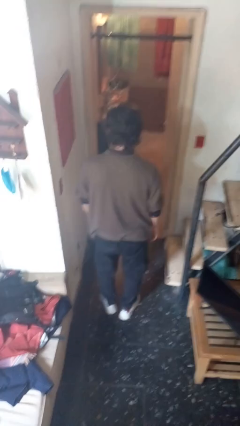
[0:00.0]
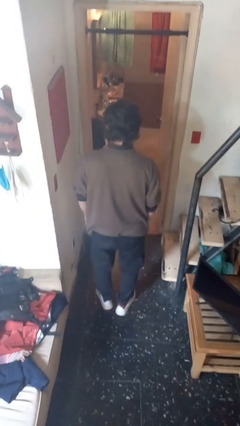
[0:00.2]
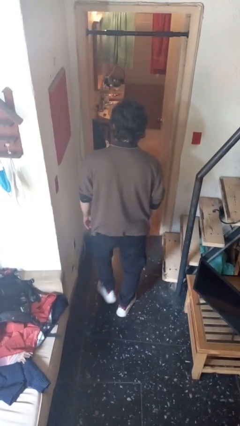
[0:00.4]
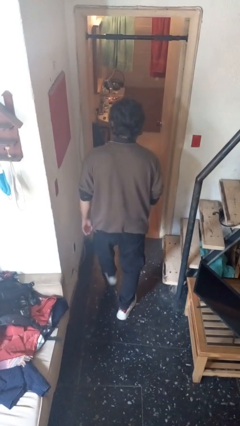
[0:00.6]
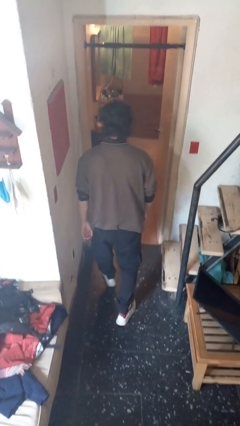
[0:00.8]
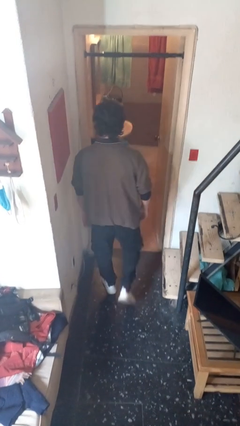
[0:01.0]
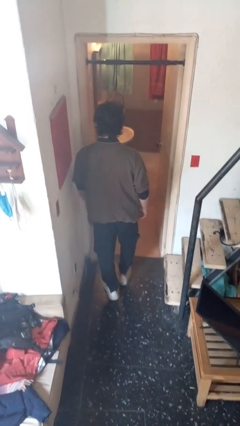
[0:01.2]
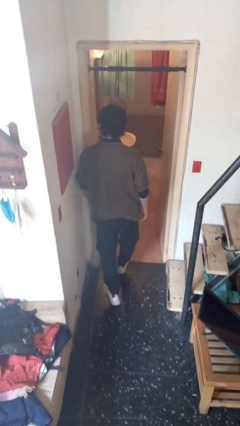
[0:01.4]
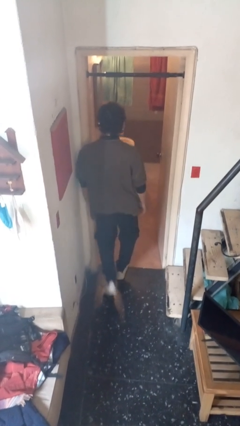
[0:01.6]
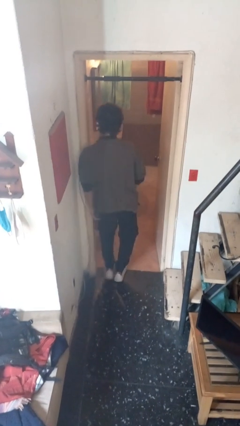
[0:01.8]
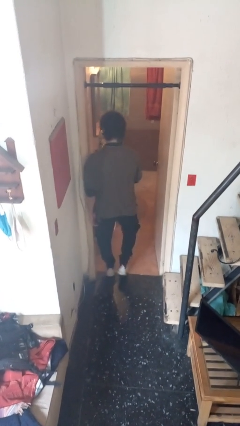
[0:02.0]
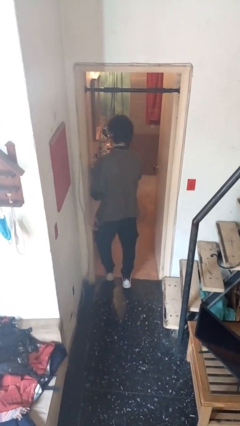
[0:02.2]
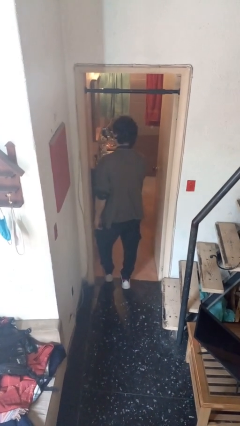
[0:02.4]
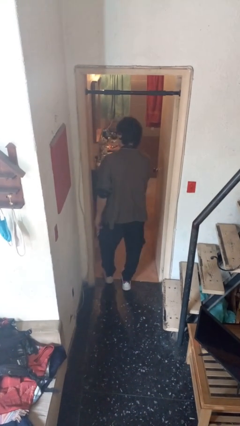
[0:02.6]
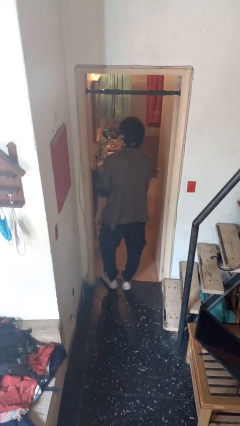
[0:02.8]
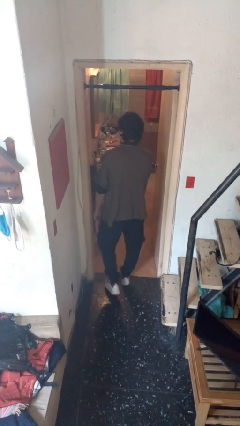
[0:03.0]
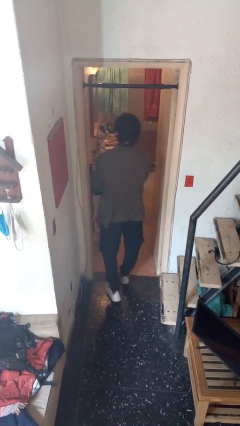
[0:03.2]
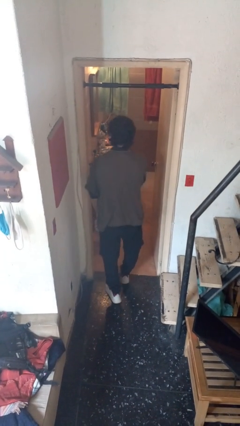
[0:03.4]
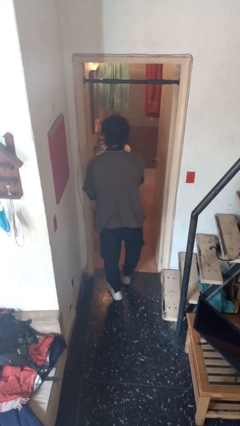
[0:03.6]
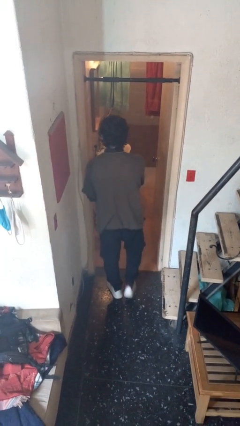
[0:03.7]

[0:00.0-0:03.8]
person bumps into wall

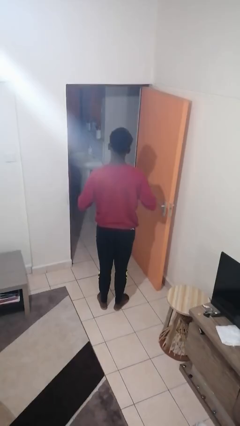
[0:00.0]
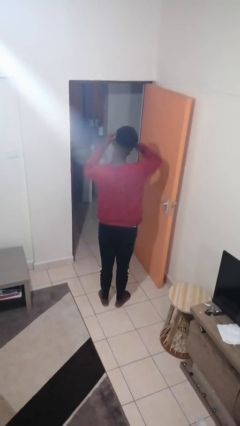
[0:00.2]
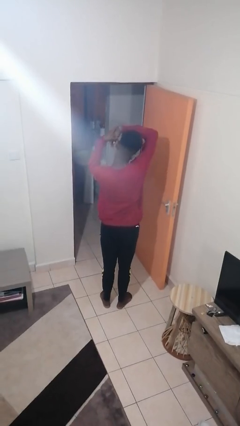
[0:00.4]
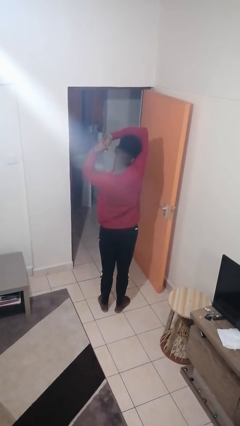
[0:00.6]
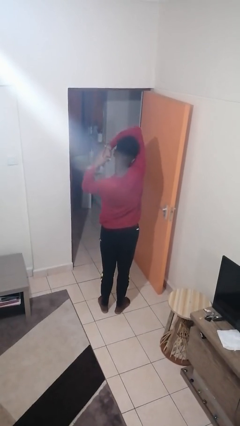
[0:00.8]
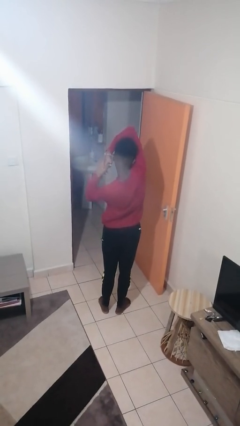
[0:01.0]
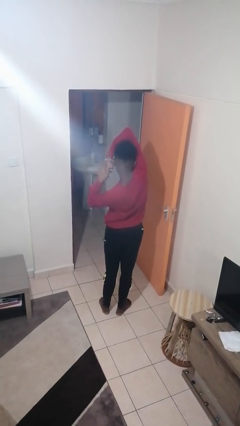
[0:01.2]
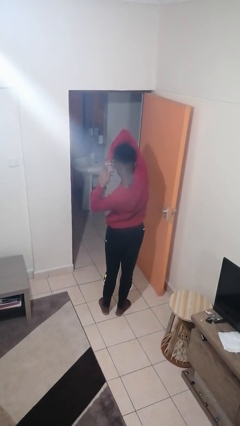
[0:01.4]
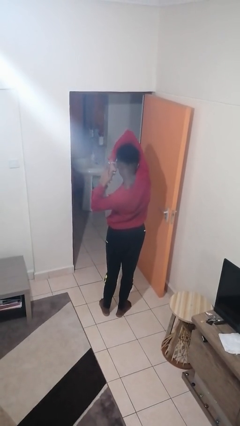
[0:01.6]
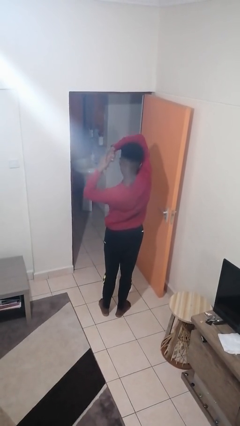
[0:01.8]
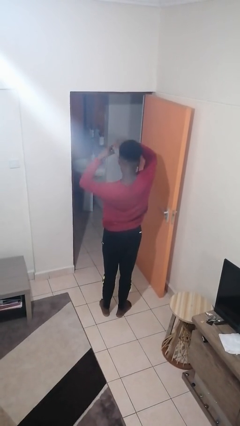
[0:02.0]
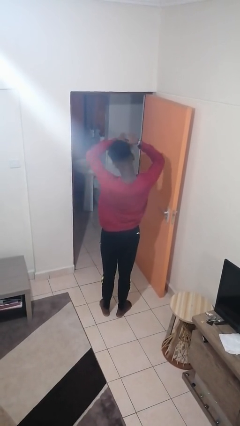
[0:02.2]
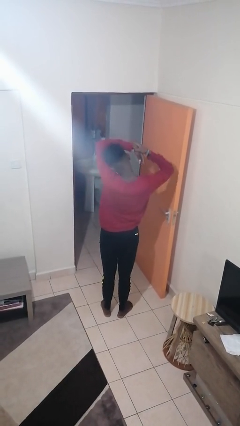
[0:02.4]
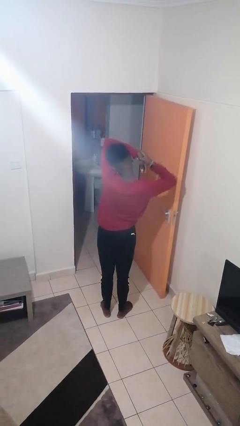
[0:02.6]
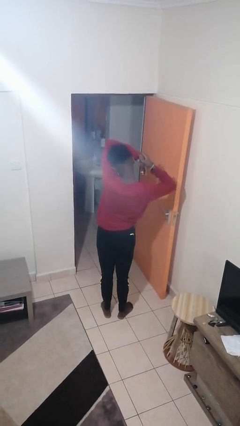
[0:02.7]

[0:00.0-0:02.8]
person stretches arms over head

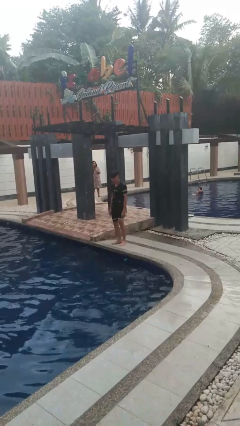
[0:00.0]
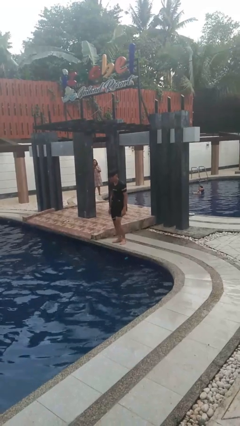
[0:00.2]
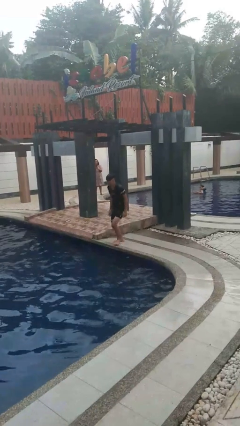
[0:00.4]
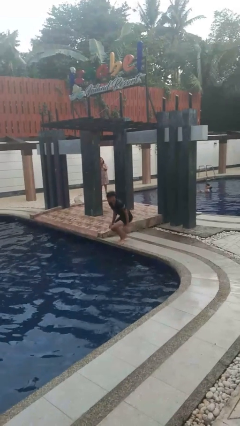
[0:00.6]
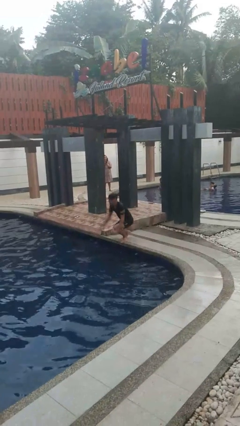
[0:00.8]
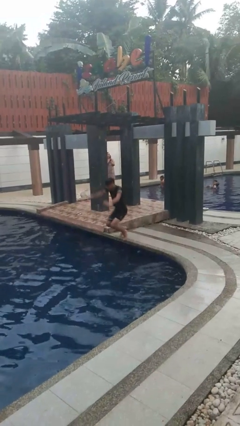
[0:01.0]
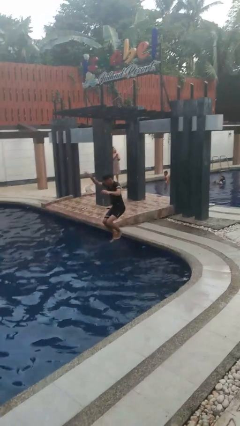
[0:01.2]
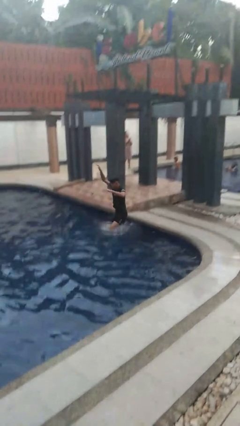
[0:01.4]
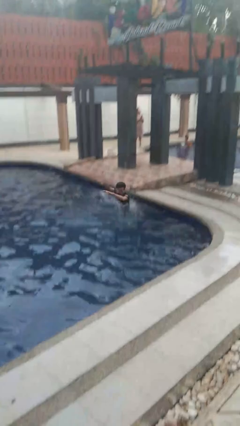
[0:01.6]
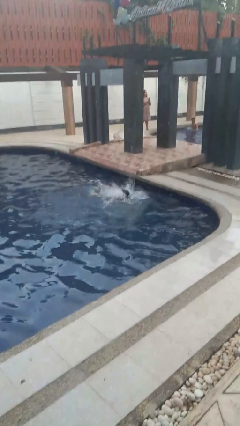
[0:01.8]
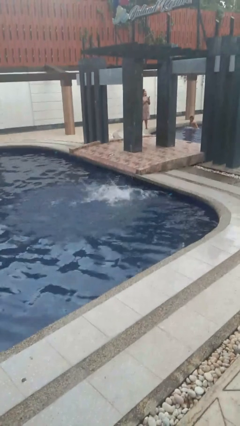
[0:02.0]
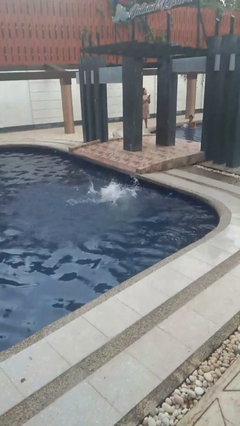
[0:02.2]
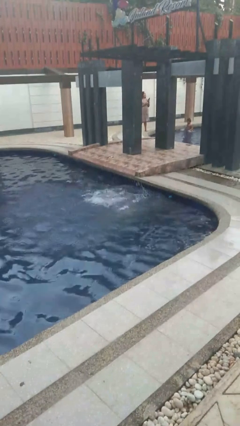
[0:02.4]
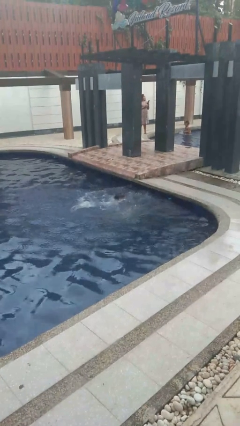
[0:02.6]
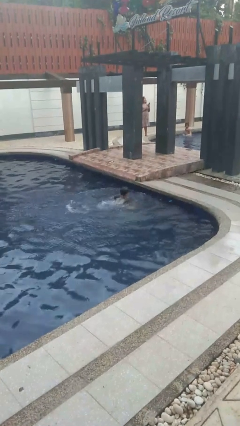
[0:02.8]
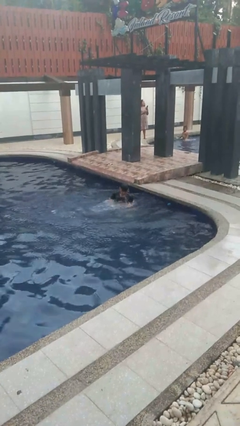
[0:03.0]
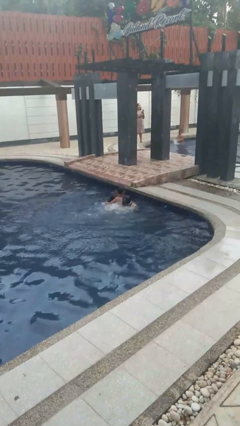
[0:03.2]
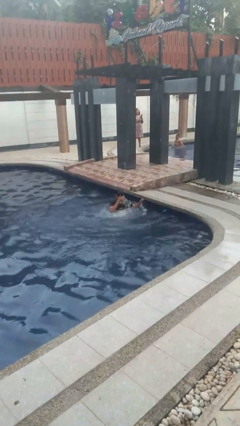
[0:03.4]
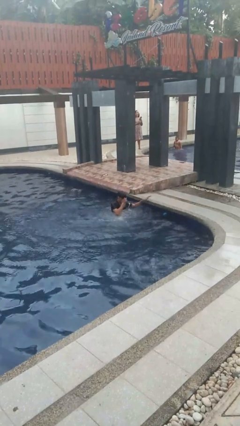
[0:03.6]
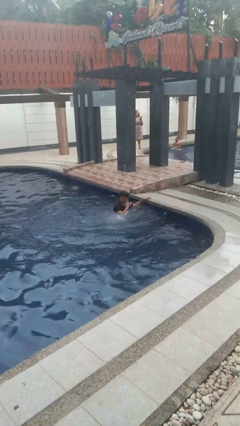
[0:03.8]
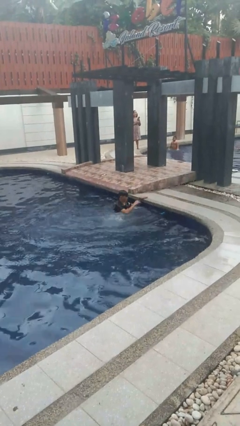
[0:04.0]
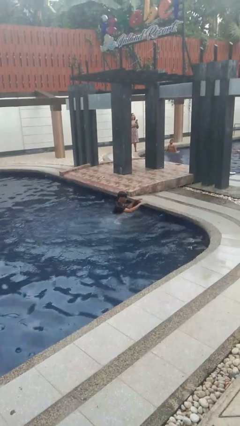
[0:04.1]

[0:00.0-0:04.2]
person jumps into pool

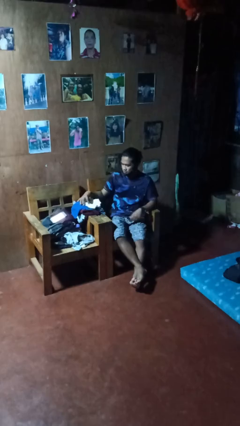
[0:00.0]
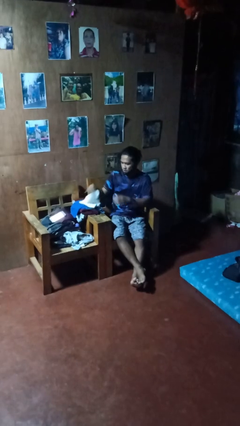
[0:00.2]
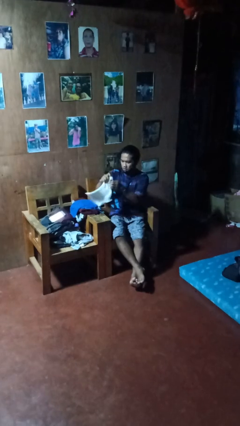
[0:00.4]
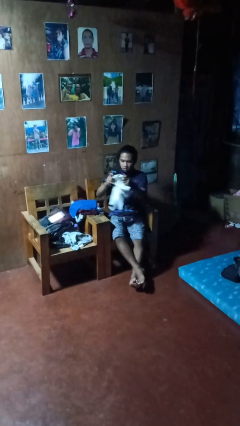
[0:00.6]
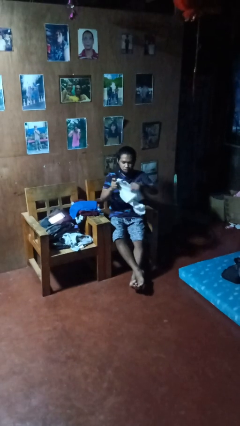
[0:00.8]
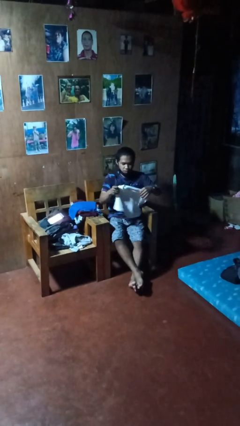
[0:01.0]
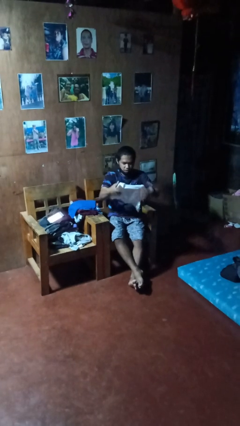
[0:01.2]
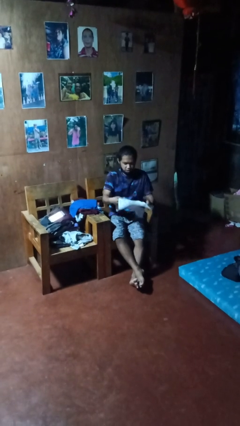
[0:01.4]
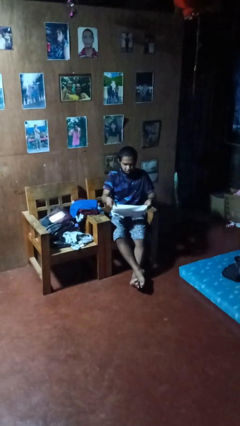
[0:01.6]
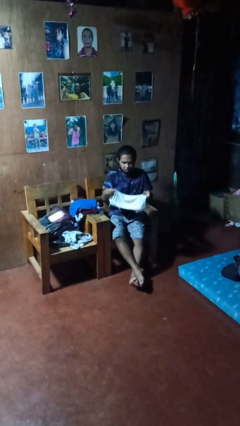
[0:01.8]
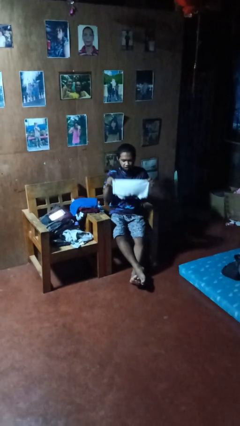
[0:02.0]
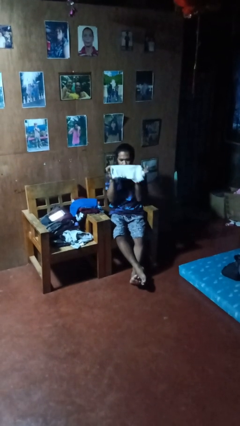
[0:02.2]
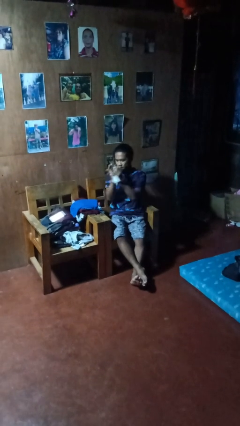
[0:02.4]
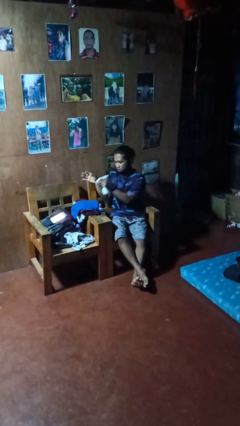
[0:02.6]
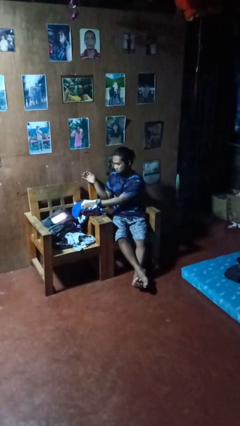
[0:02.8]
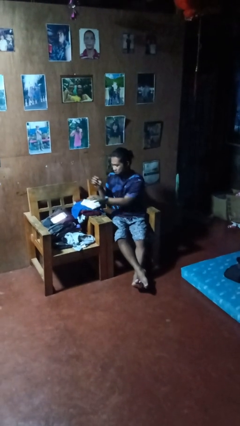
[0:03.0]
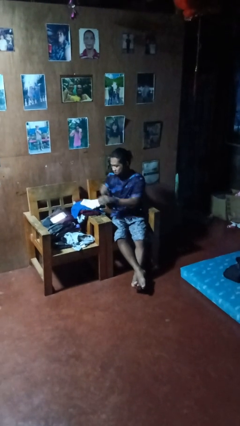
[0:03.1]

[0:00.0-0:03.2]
person folds shirt

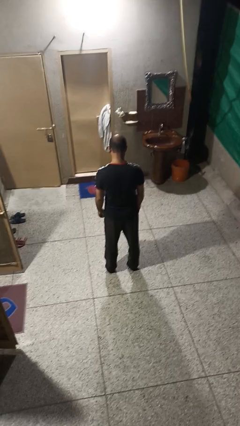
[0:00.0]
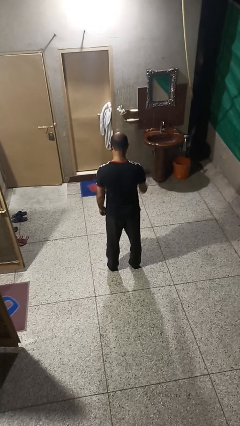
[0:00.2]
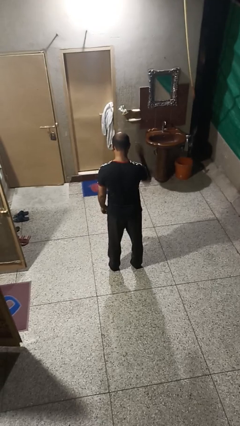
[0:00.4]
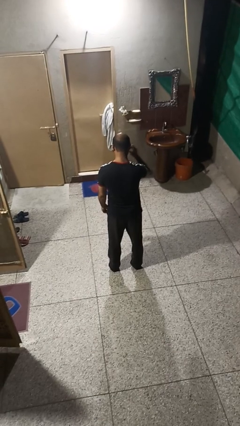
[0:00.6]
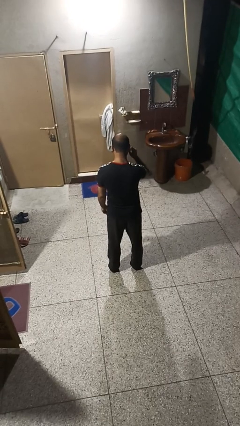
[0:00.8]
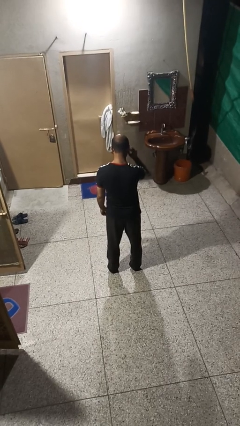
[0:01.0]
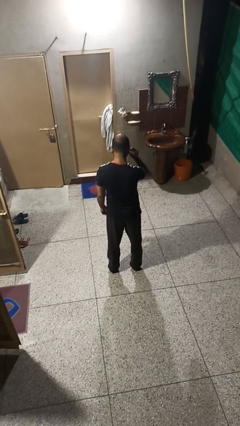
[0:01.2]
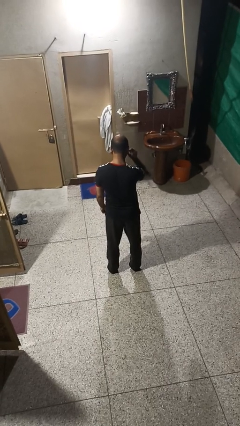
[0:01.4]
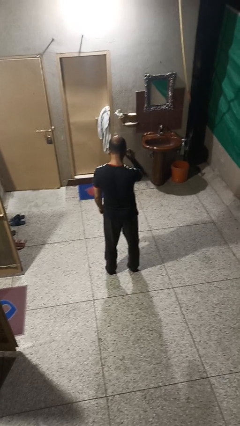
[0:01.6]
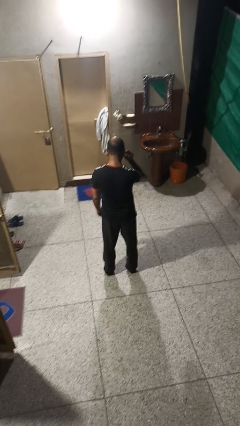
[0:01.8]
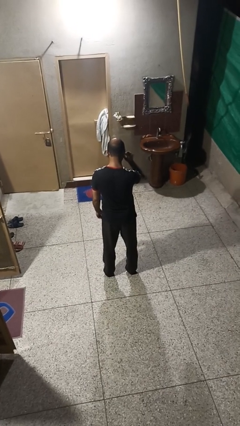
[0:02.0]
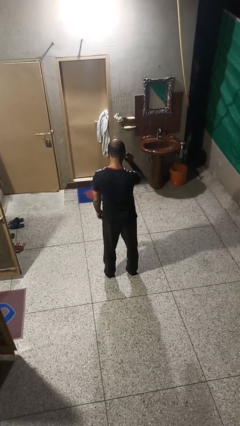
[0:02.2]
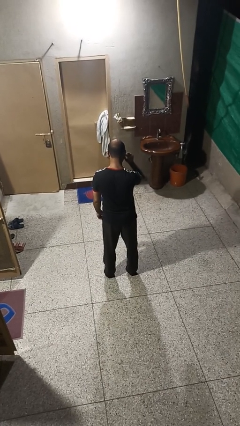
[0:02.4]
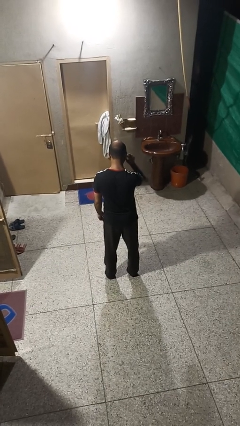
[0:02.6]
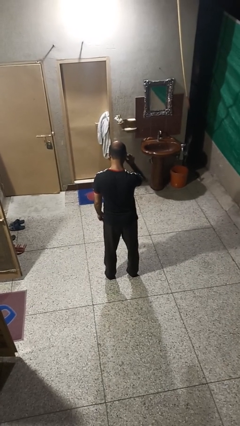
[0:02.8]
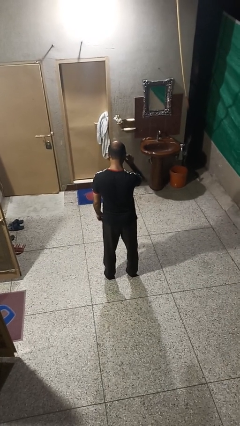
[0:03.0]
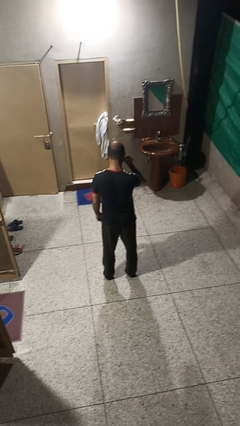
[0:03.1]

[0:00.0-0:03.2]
person touches earlobe

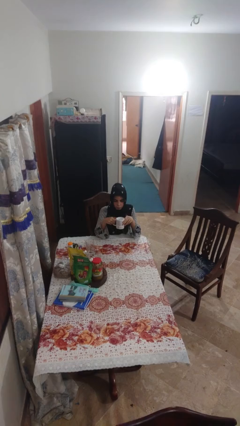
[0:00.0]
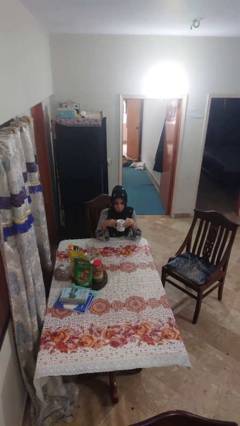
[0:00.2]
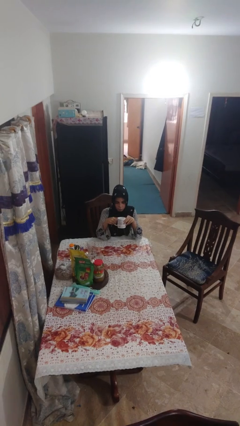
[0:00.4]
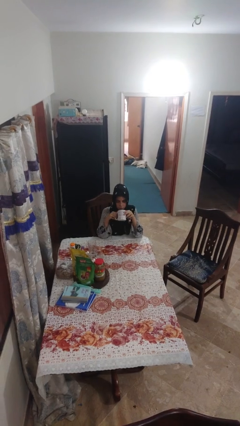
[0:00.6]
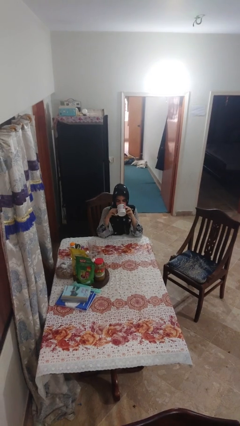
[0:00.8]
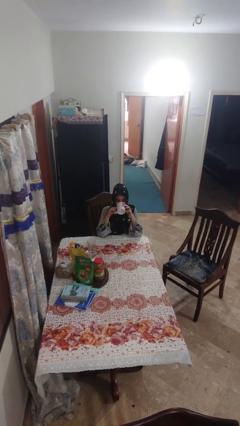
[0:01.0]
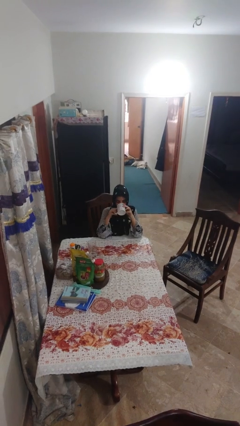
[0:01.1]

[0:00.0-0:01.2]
person drinks from mug
